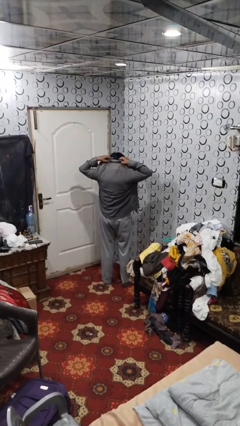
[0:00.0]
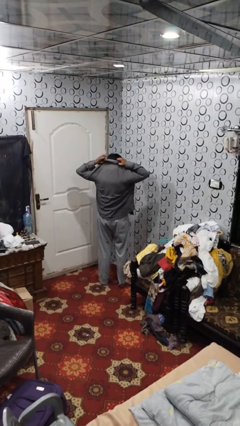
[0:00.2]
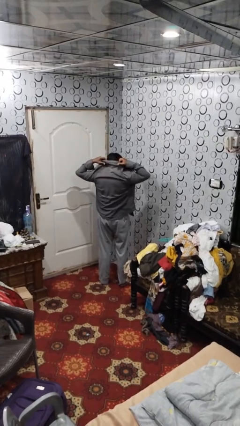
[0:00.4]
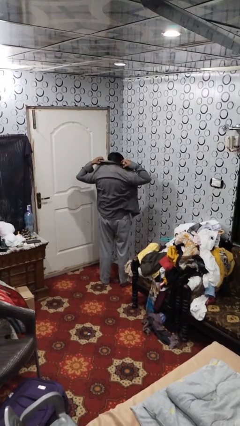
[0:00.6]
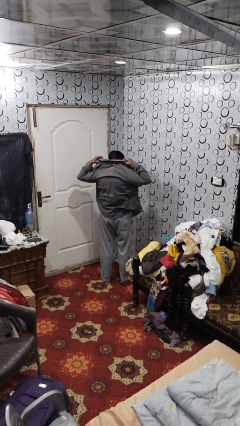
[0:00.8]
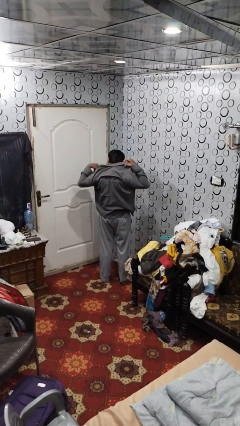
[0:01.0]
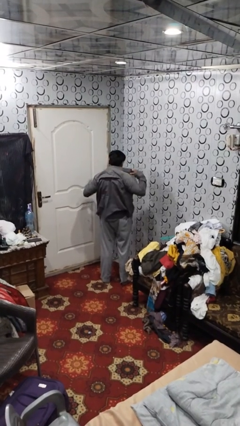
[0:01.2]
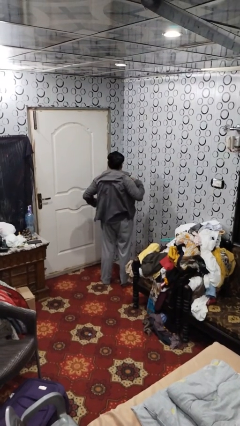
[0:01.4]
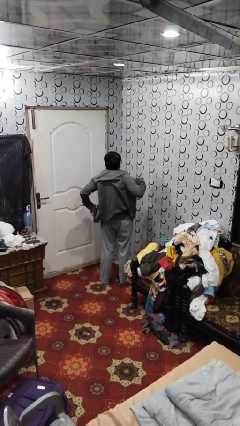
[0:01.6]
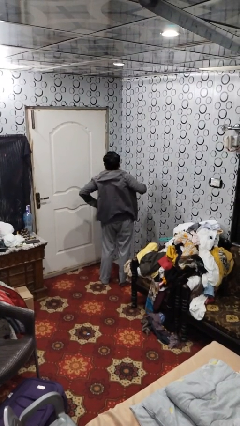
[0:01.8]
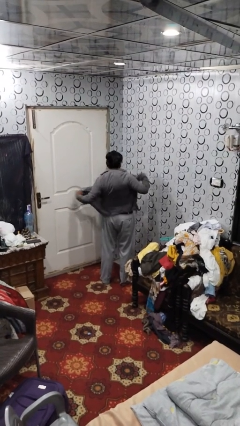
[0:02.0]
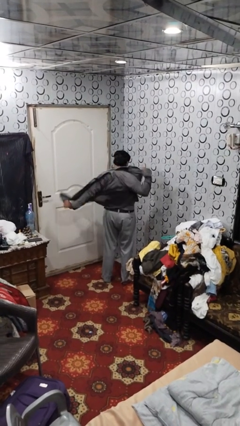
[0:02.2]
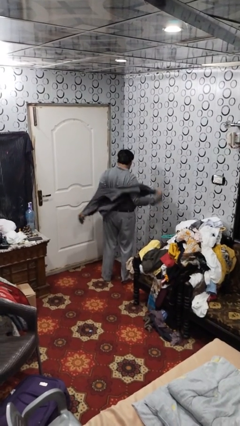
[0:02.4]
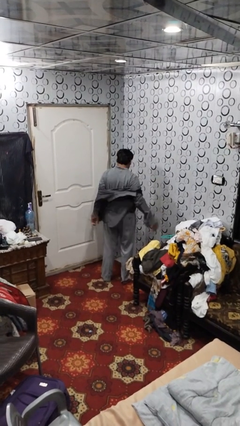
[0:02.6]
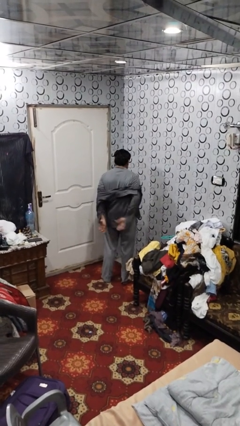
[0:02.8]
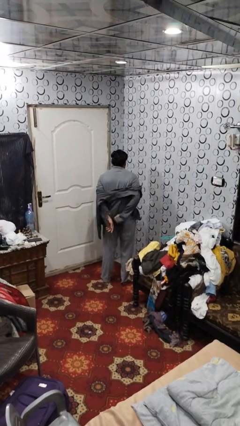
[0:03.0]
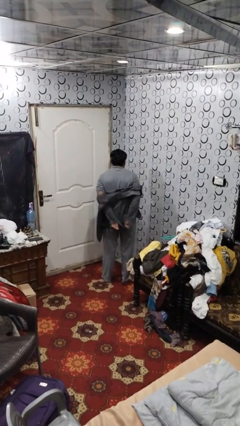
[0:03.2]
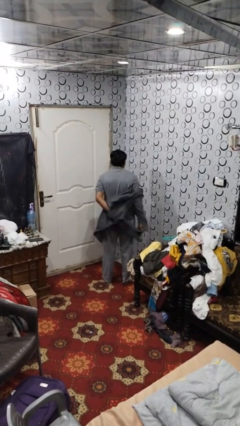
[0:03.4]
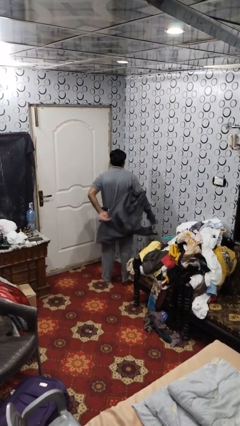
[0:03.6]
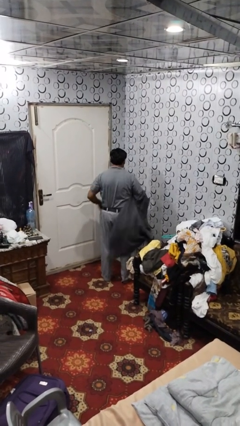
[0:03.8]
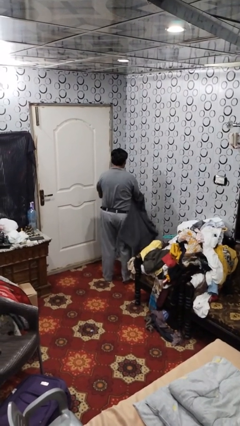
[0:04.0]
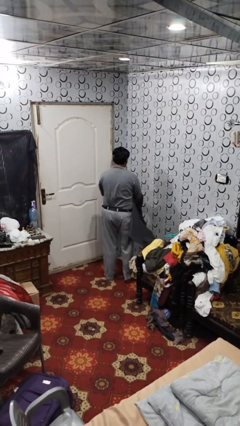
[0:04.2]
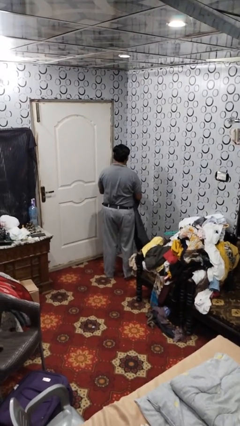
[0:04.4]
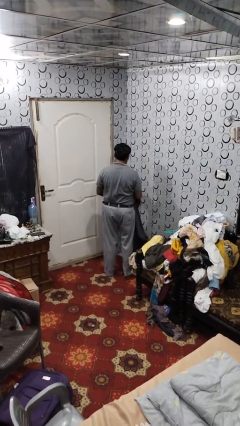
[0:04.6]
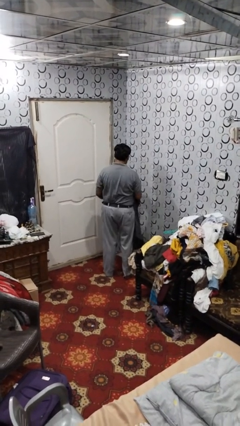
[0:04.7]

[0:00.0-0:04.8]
person takes off shirt

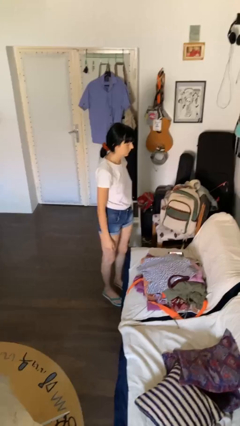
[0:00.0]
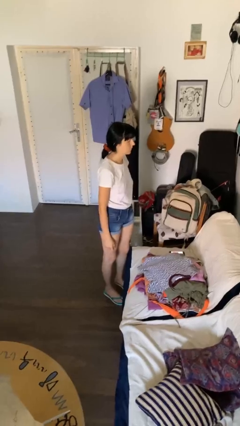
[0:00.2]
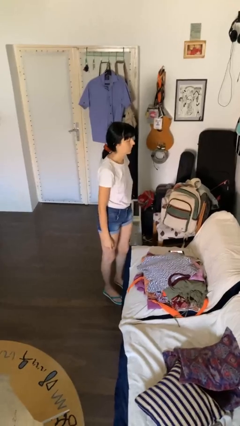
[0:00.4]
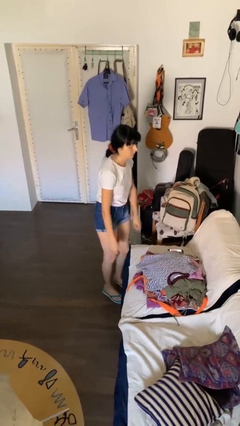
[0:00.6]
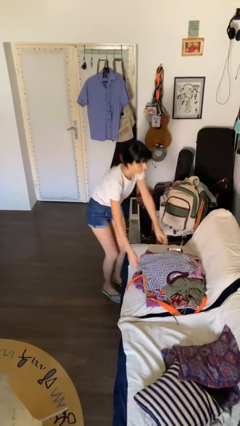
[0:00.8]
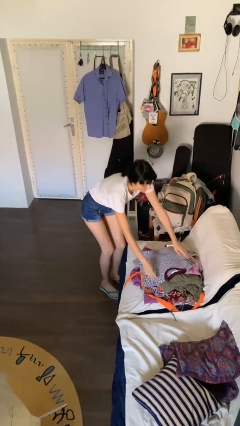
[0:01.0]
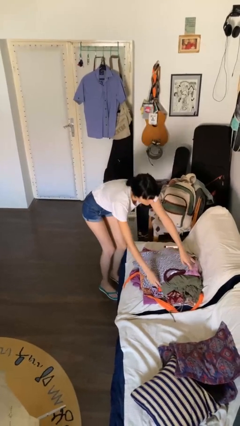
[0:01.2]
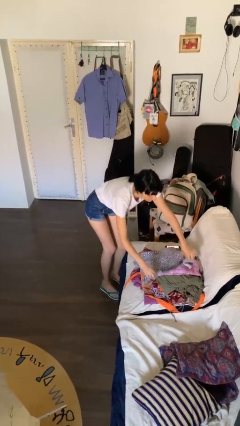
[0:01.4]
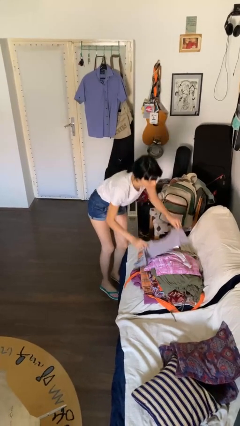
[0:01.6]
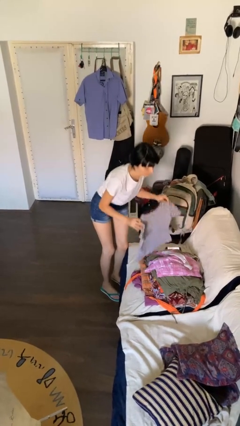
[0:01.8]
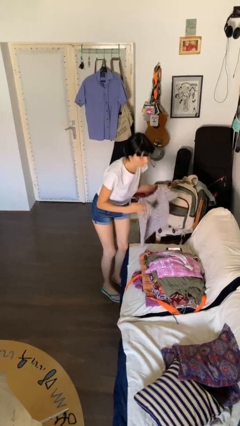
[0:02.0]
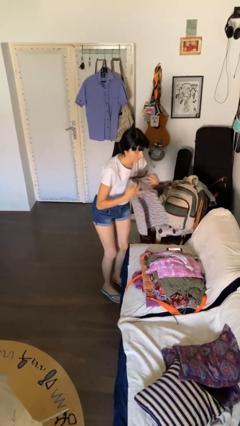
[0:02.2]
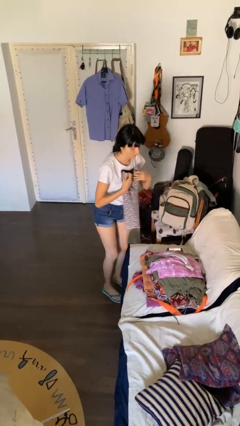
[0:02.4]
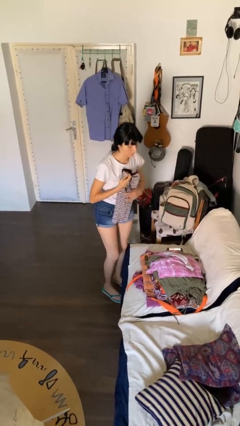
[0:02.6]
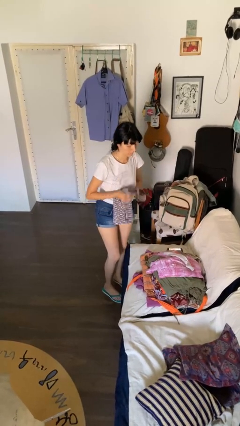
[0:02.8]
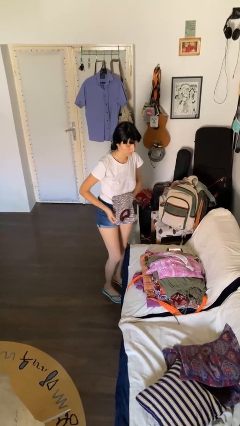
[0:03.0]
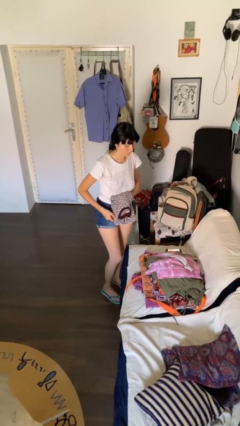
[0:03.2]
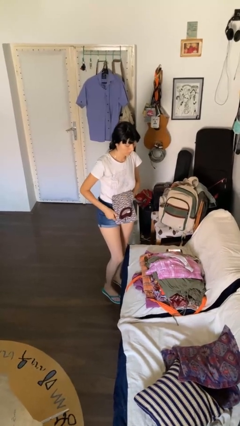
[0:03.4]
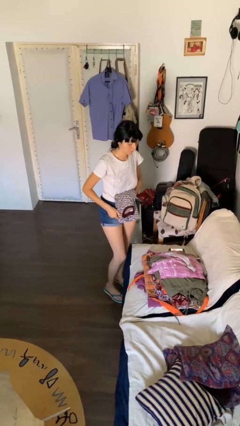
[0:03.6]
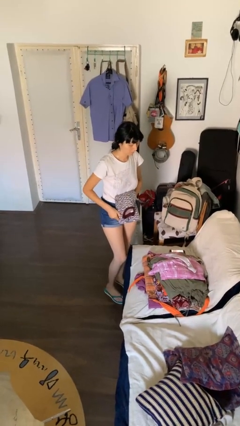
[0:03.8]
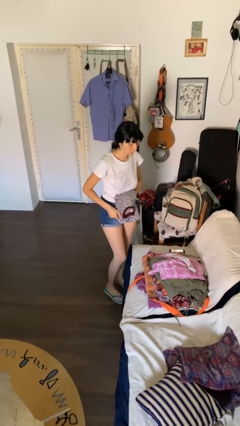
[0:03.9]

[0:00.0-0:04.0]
person folds shirt

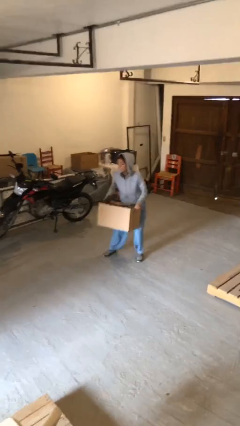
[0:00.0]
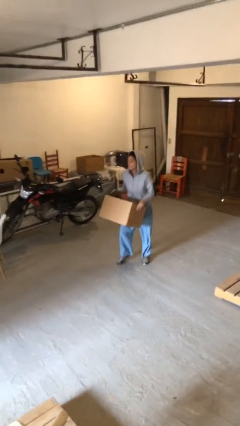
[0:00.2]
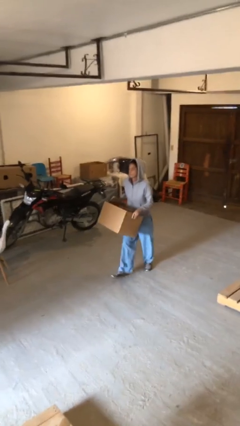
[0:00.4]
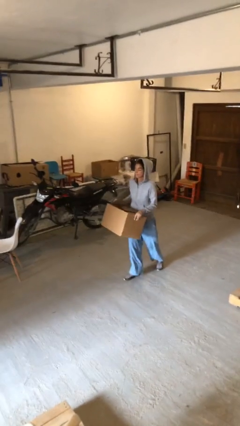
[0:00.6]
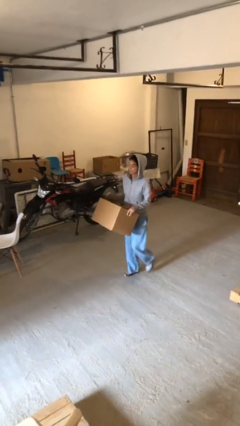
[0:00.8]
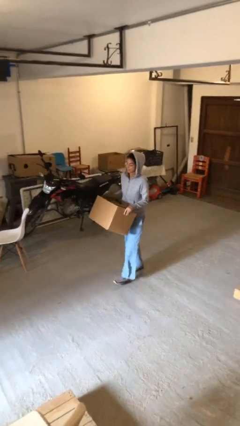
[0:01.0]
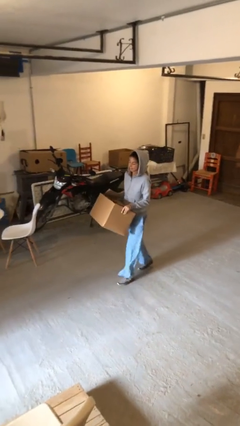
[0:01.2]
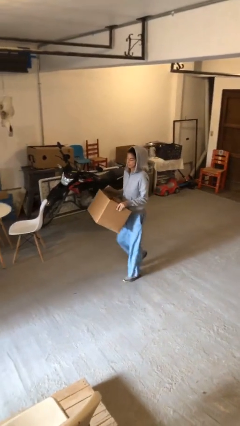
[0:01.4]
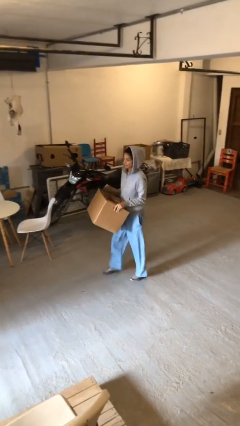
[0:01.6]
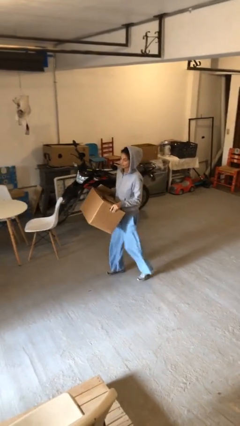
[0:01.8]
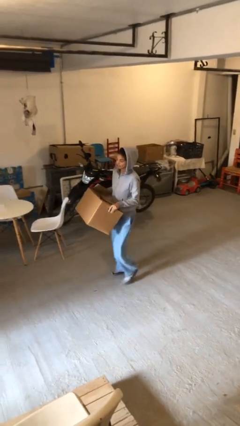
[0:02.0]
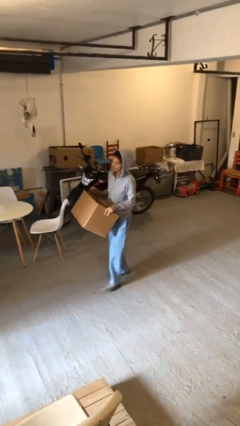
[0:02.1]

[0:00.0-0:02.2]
person carries heavy object

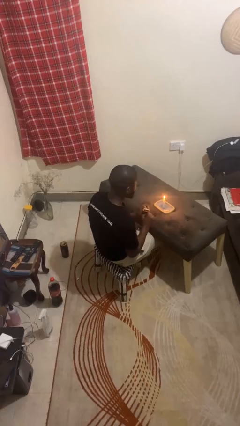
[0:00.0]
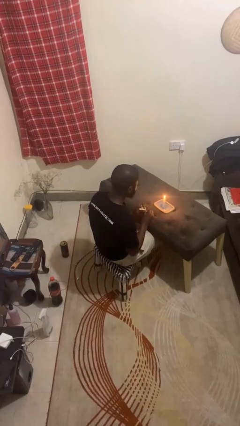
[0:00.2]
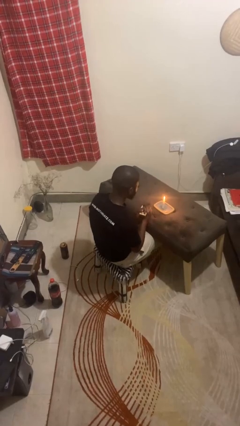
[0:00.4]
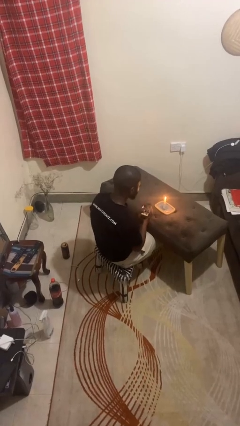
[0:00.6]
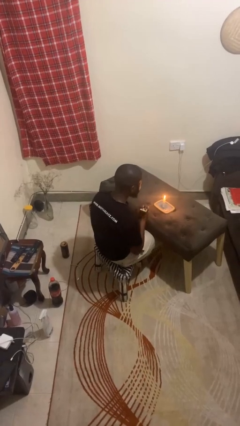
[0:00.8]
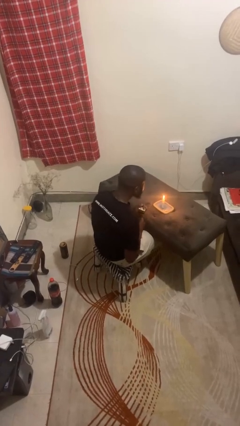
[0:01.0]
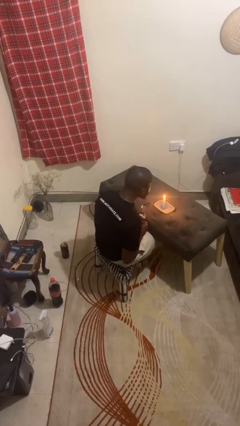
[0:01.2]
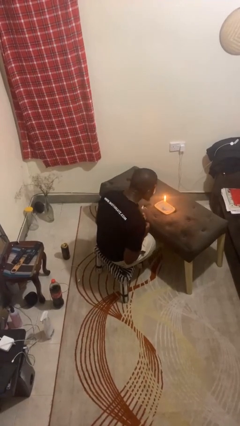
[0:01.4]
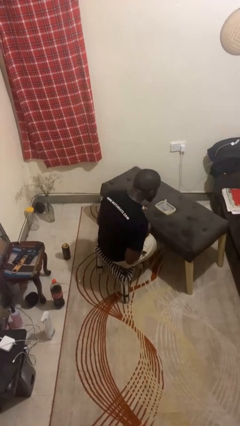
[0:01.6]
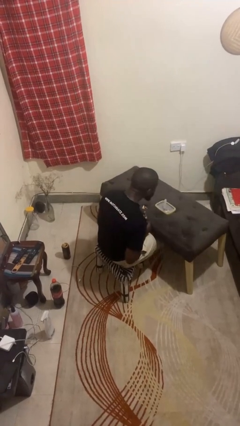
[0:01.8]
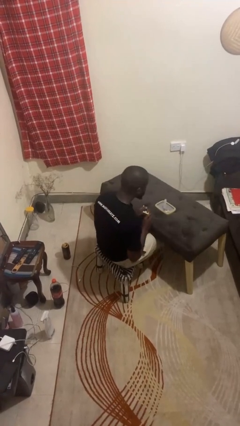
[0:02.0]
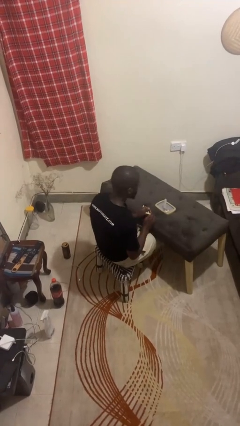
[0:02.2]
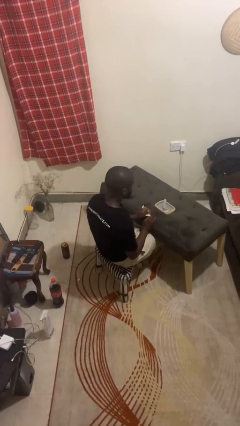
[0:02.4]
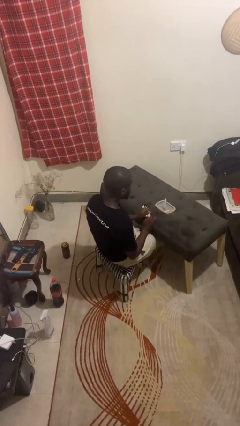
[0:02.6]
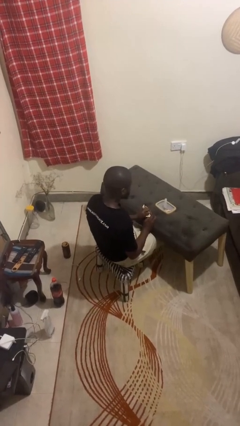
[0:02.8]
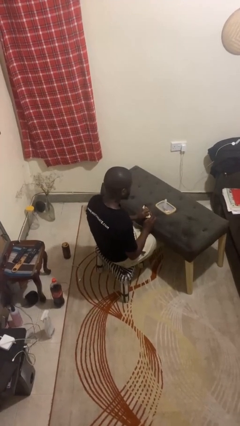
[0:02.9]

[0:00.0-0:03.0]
person extinguishes candle

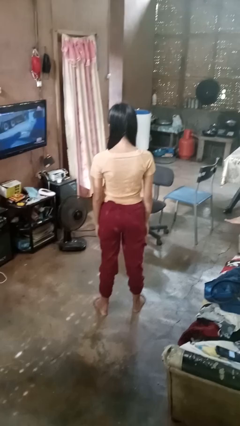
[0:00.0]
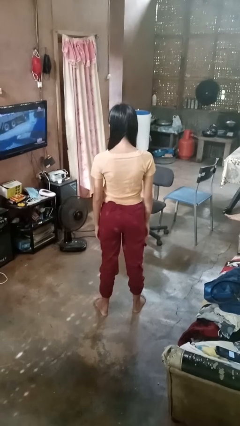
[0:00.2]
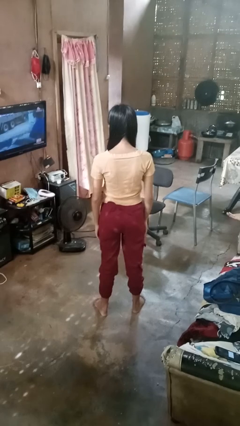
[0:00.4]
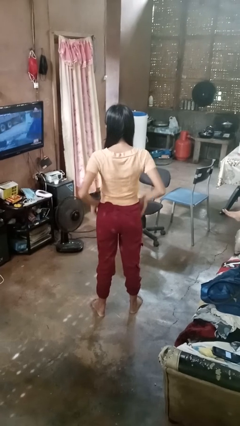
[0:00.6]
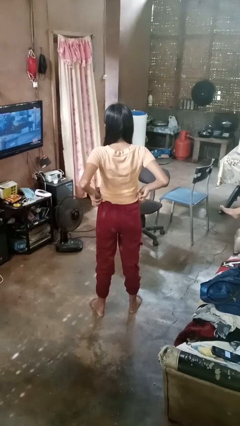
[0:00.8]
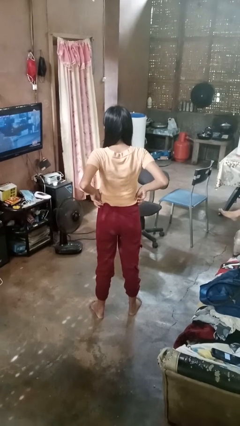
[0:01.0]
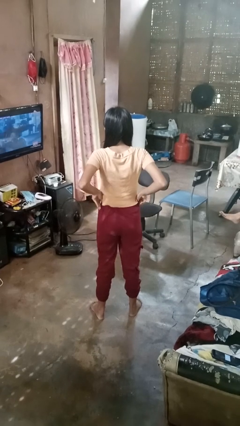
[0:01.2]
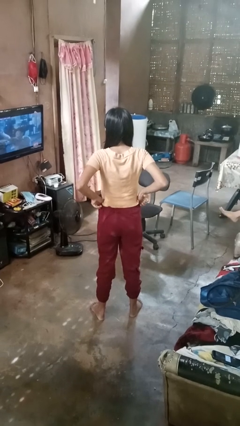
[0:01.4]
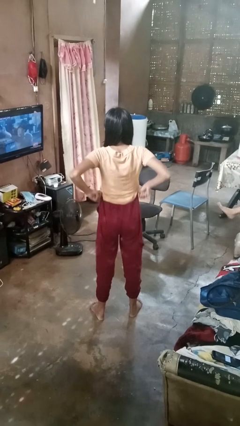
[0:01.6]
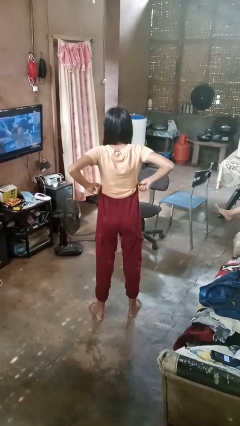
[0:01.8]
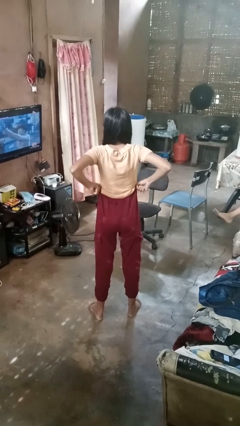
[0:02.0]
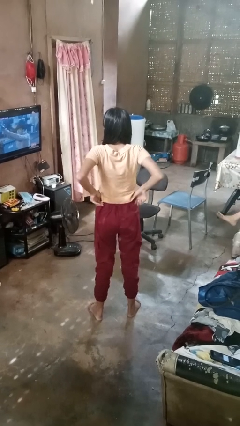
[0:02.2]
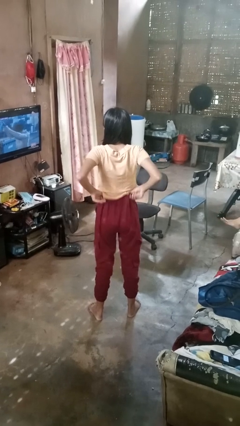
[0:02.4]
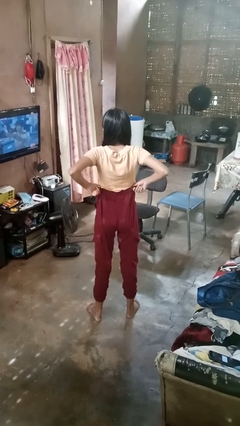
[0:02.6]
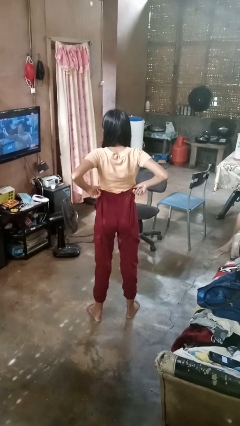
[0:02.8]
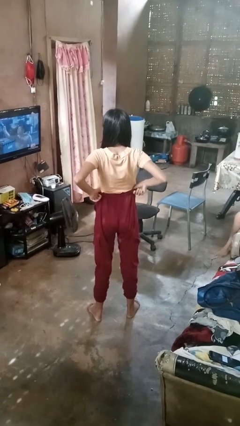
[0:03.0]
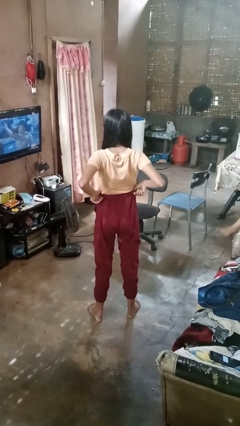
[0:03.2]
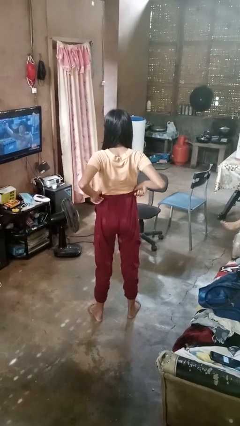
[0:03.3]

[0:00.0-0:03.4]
person hikes up pants
